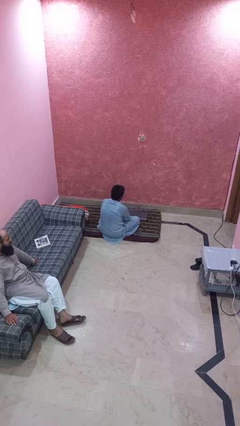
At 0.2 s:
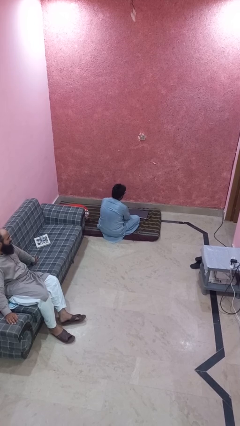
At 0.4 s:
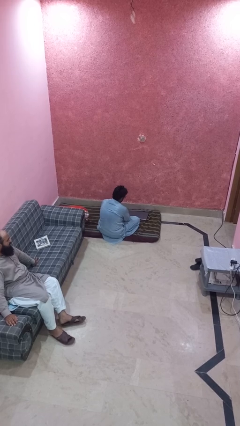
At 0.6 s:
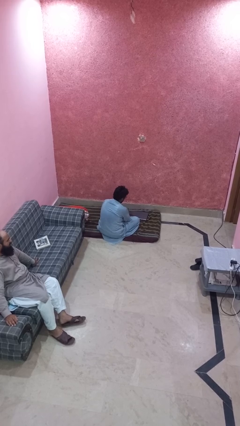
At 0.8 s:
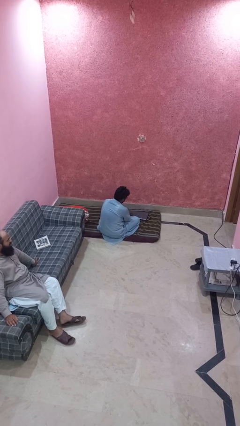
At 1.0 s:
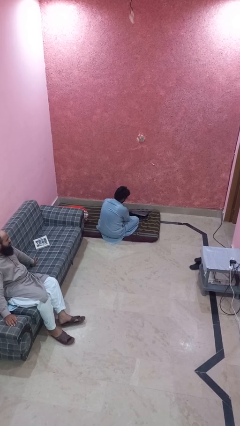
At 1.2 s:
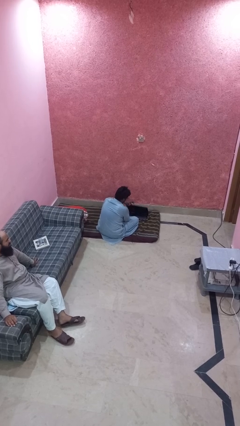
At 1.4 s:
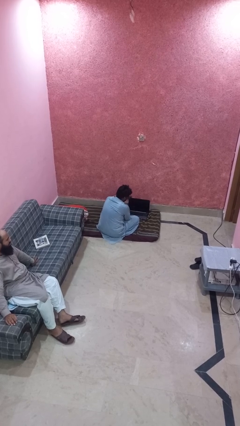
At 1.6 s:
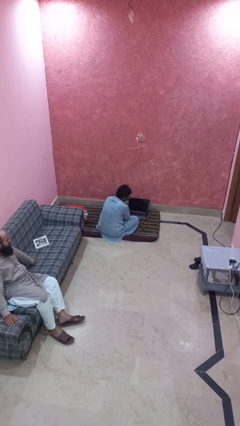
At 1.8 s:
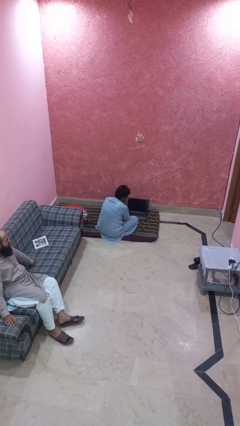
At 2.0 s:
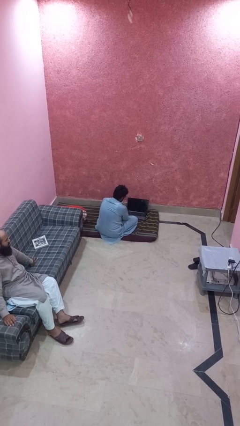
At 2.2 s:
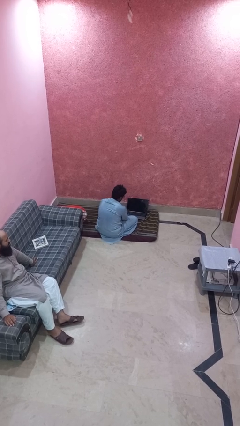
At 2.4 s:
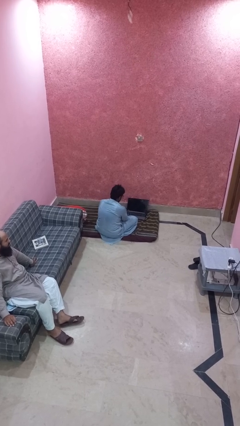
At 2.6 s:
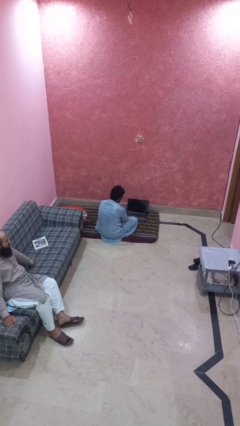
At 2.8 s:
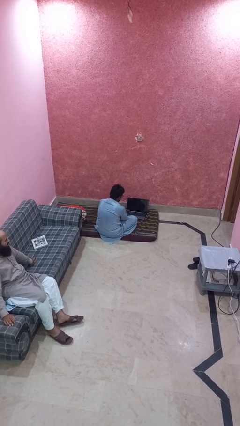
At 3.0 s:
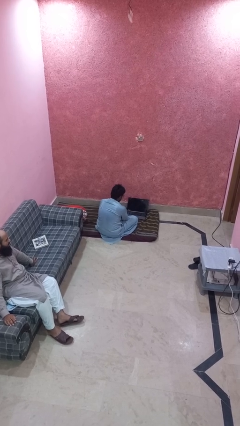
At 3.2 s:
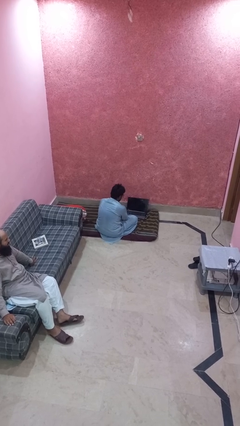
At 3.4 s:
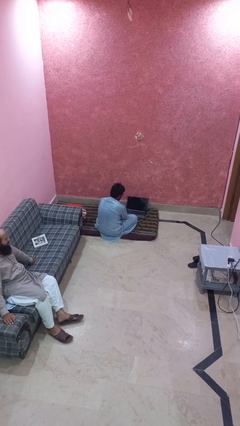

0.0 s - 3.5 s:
person opens laptop

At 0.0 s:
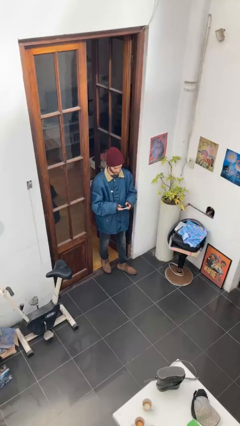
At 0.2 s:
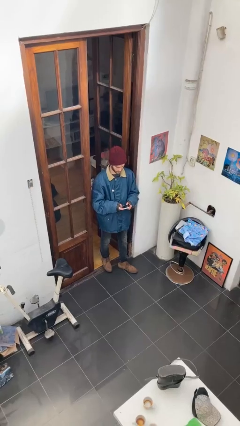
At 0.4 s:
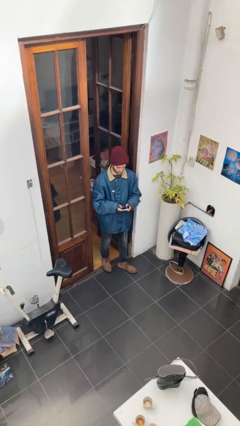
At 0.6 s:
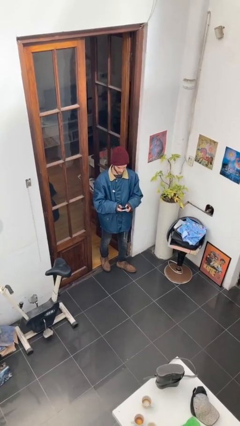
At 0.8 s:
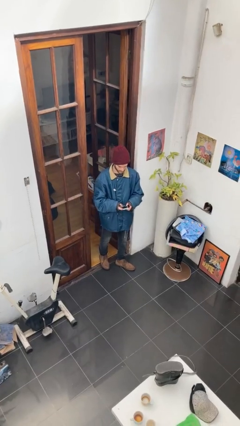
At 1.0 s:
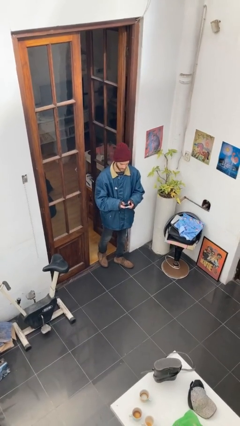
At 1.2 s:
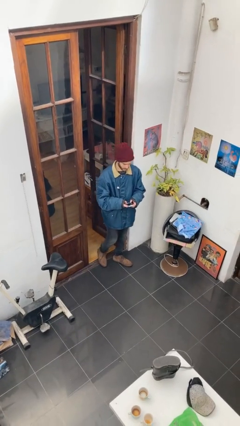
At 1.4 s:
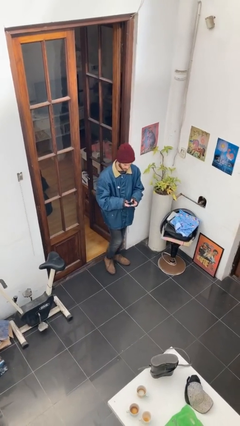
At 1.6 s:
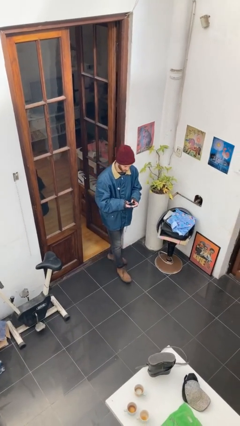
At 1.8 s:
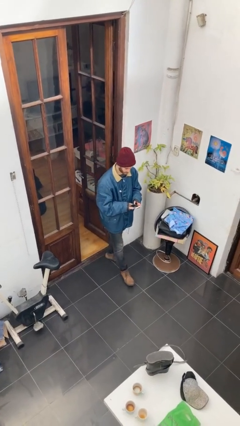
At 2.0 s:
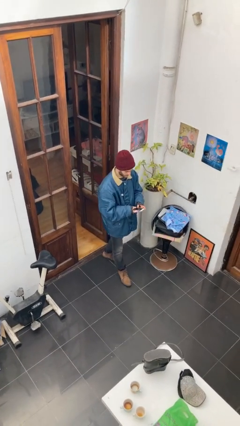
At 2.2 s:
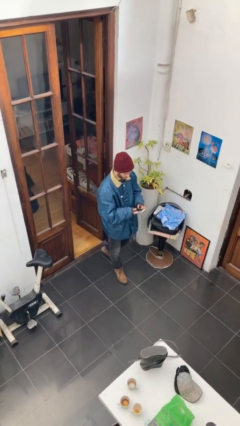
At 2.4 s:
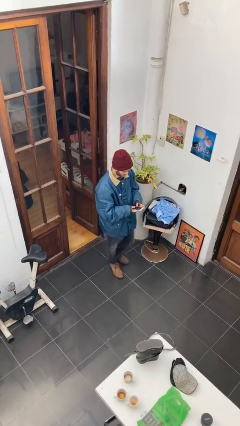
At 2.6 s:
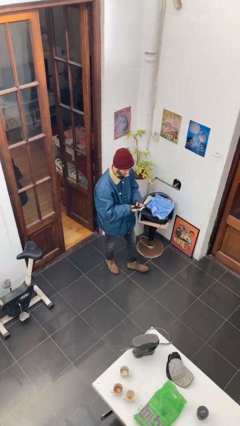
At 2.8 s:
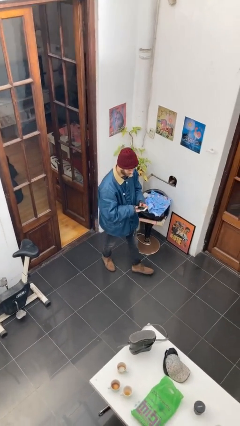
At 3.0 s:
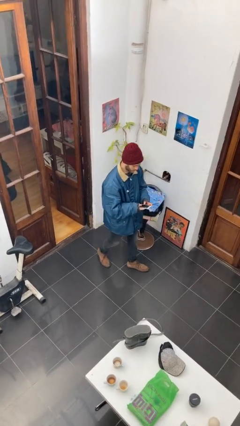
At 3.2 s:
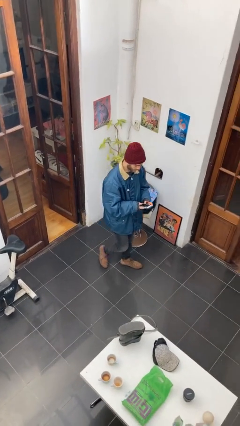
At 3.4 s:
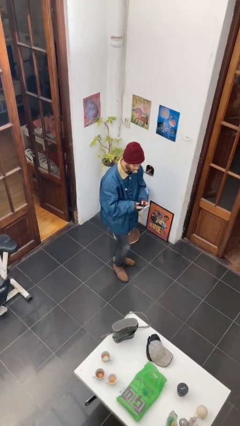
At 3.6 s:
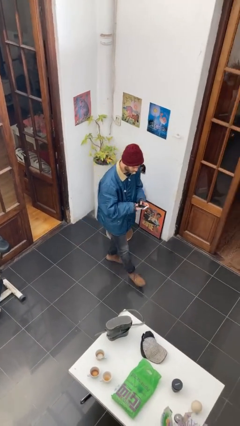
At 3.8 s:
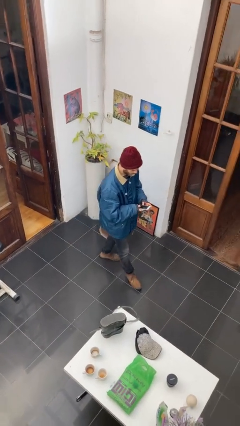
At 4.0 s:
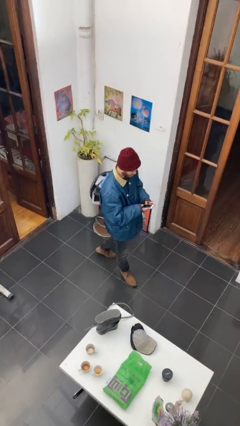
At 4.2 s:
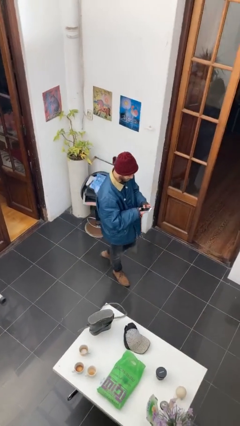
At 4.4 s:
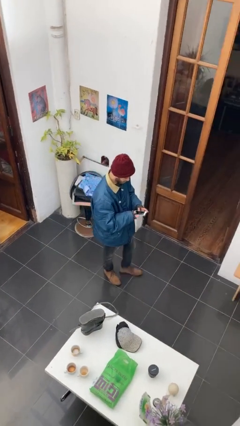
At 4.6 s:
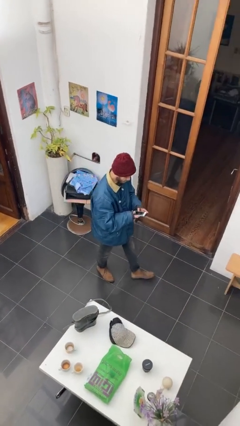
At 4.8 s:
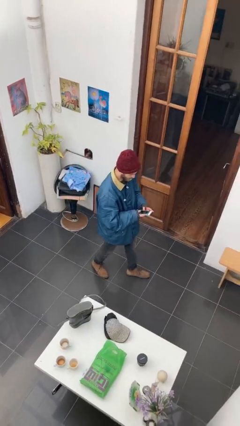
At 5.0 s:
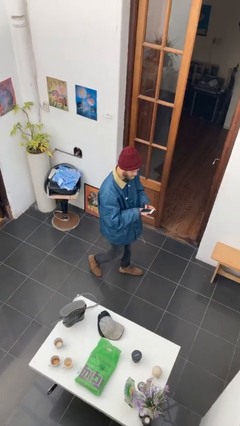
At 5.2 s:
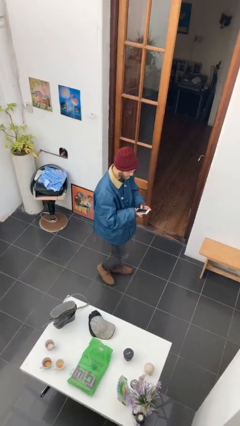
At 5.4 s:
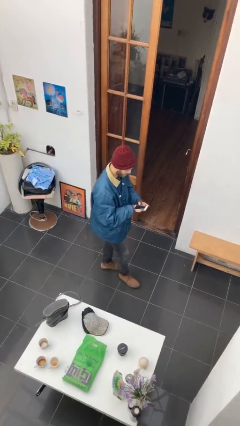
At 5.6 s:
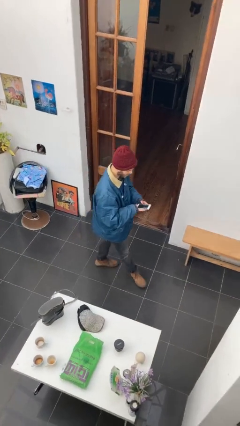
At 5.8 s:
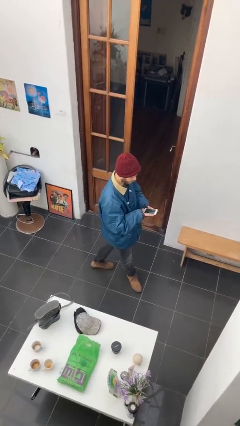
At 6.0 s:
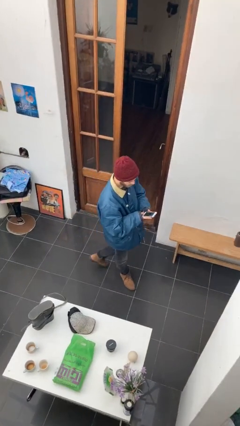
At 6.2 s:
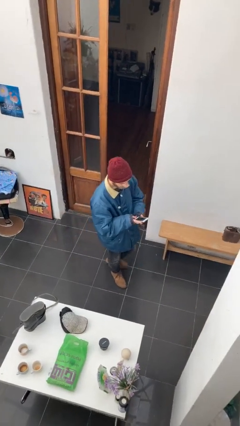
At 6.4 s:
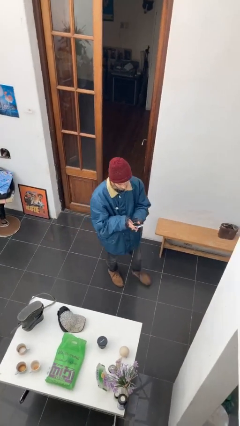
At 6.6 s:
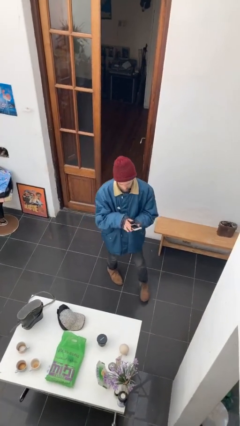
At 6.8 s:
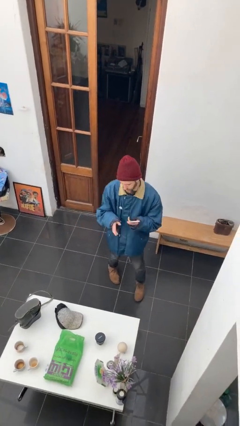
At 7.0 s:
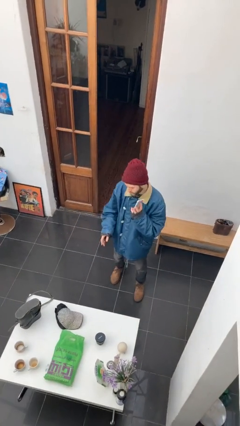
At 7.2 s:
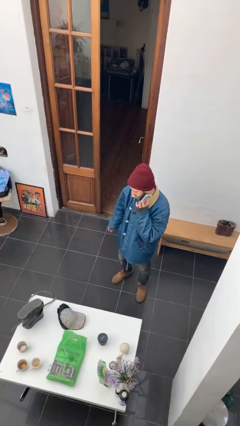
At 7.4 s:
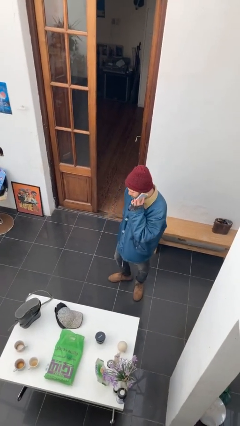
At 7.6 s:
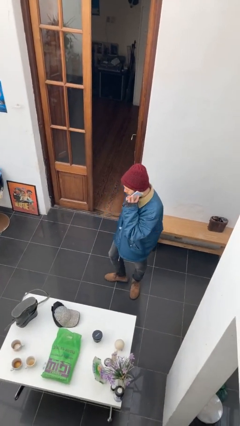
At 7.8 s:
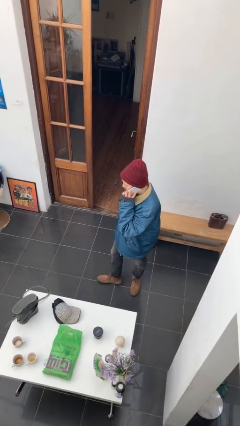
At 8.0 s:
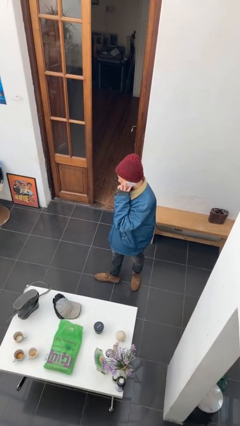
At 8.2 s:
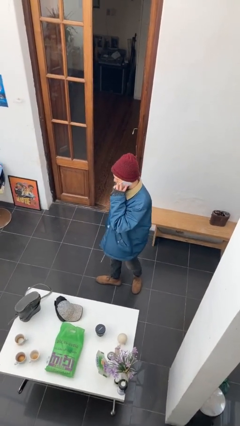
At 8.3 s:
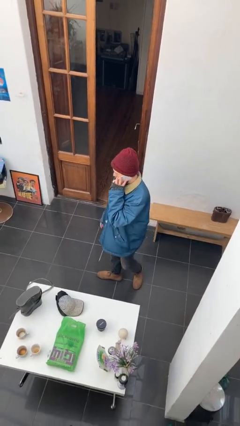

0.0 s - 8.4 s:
person texts on phone

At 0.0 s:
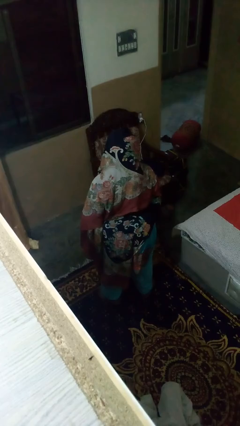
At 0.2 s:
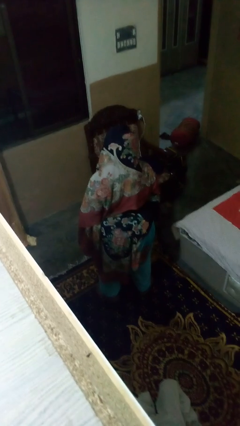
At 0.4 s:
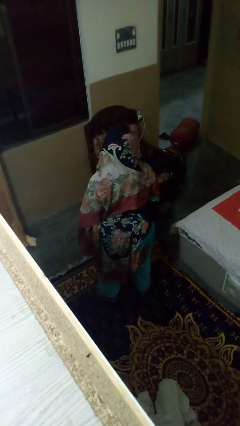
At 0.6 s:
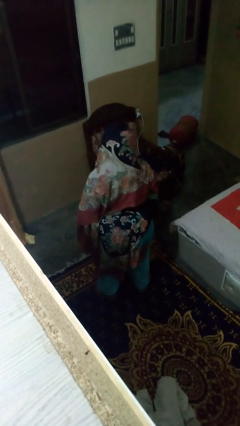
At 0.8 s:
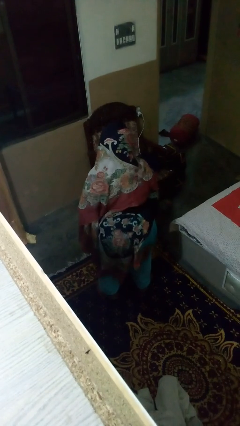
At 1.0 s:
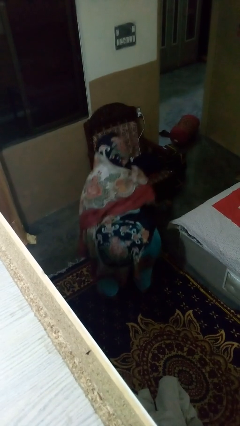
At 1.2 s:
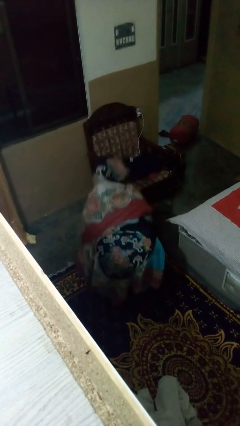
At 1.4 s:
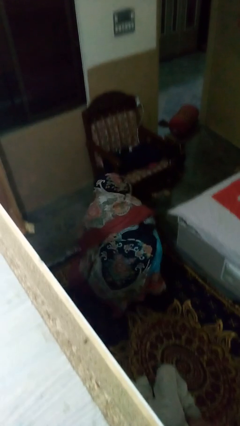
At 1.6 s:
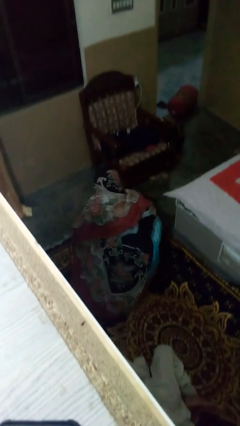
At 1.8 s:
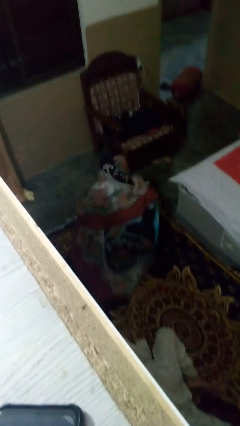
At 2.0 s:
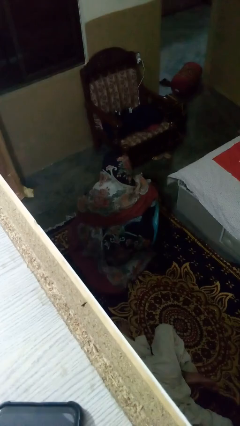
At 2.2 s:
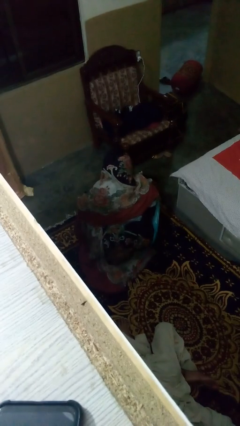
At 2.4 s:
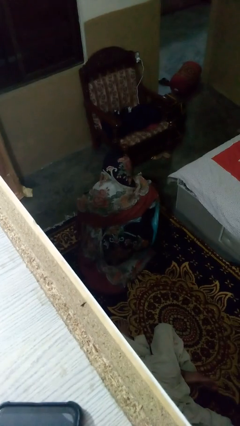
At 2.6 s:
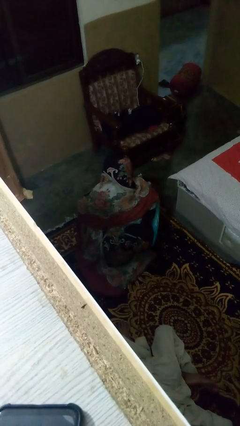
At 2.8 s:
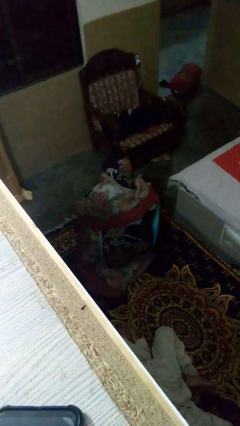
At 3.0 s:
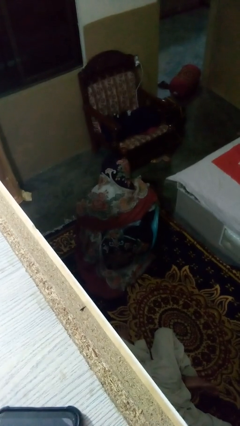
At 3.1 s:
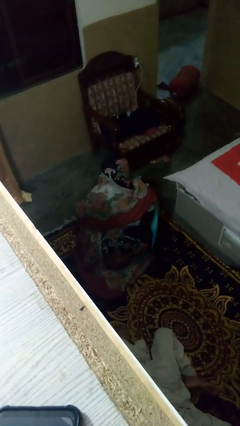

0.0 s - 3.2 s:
person squats

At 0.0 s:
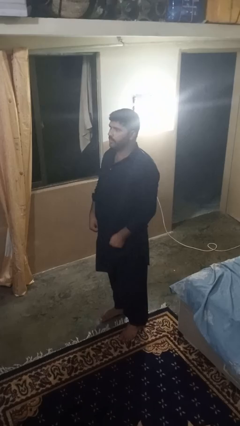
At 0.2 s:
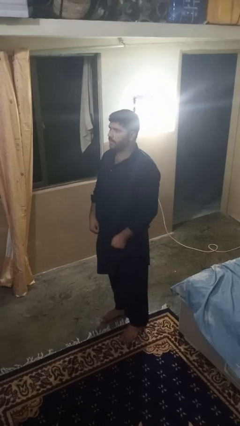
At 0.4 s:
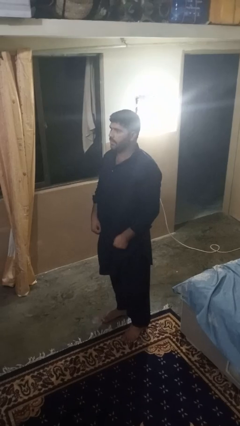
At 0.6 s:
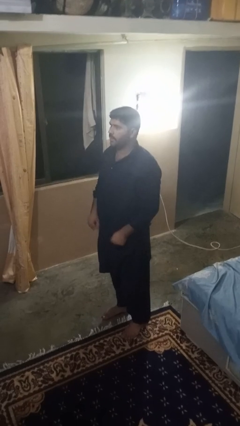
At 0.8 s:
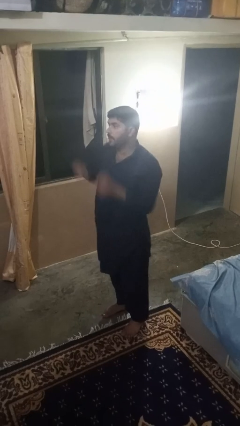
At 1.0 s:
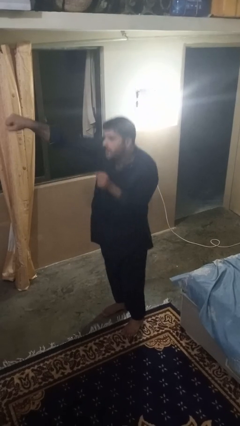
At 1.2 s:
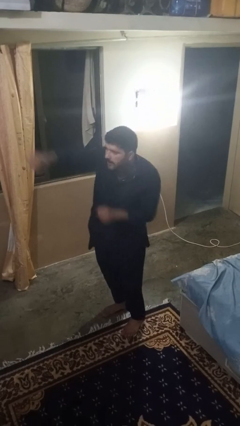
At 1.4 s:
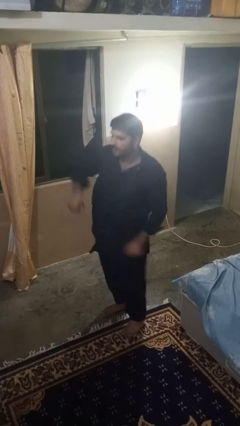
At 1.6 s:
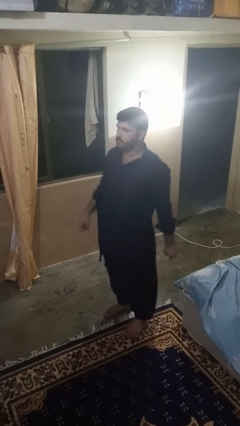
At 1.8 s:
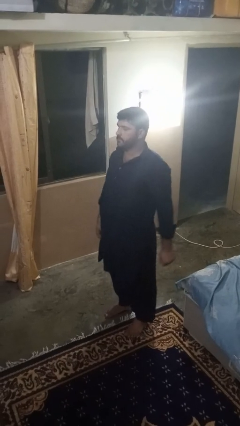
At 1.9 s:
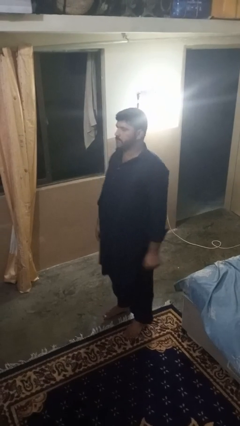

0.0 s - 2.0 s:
person karate chop

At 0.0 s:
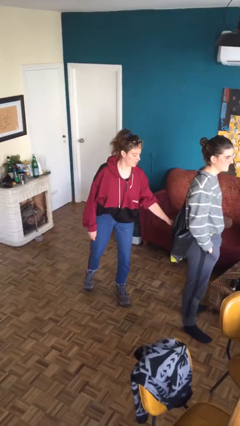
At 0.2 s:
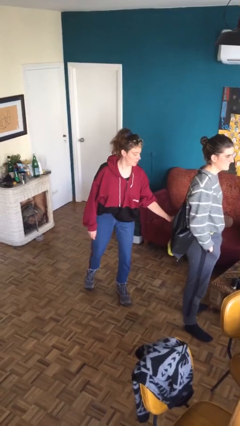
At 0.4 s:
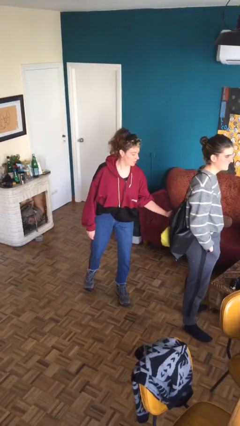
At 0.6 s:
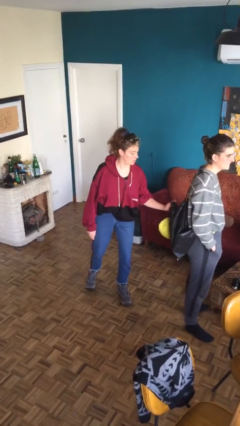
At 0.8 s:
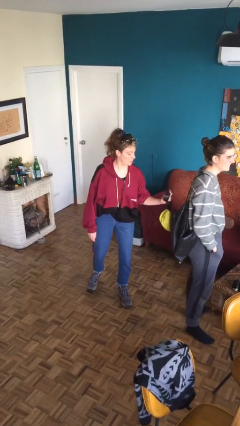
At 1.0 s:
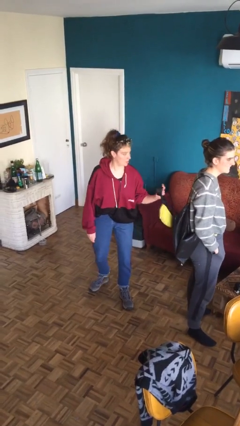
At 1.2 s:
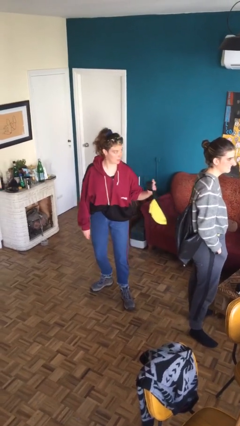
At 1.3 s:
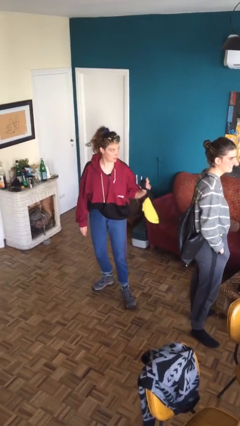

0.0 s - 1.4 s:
person steals object from person
